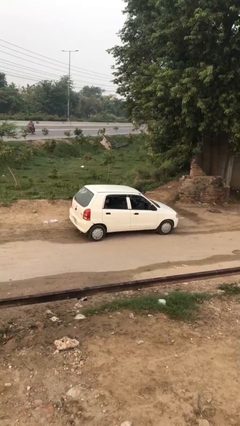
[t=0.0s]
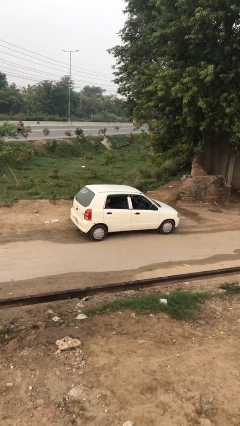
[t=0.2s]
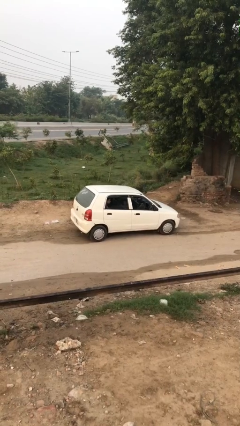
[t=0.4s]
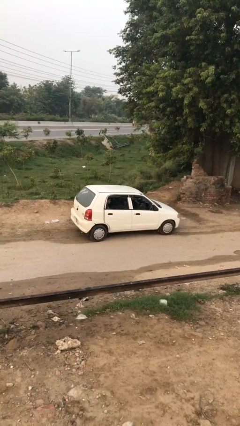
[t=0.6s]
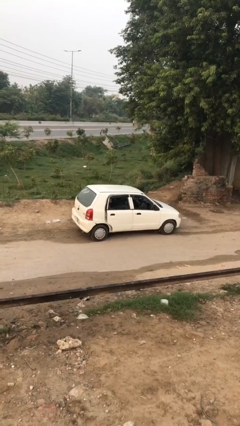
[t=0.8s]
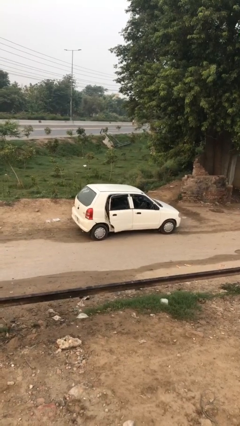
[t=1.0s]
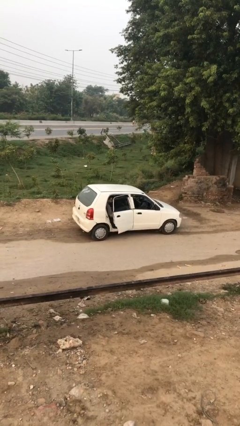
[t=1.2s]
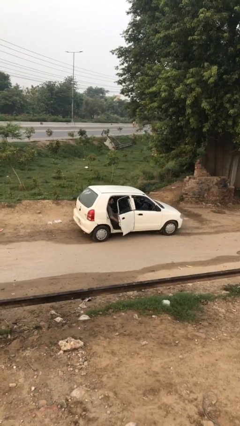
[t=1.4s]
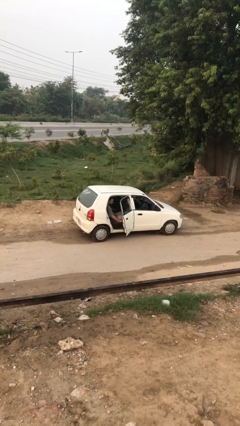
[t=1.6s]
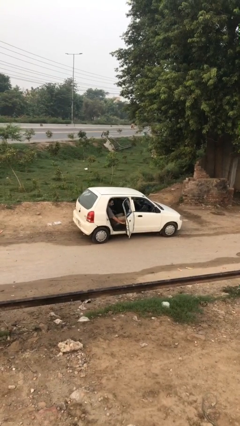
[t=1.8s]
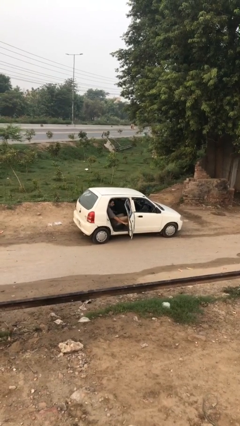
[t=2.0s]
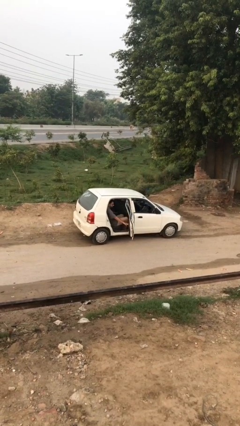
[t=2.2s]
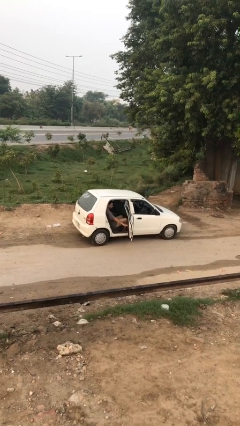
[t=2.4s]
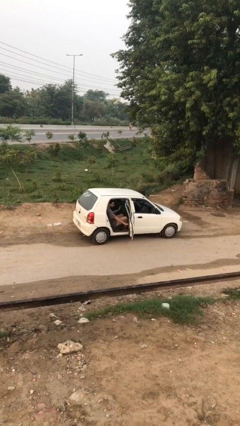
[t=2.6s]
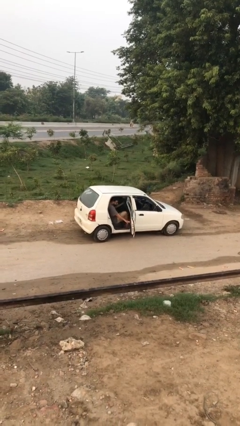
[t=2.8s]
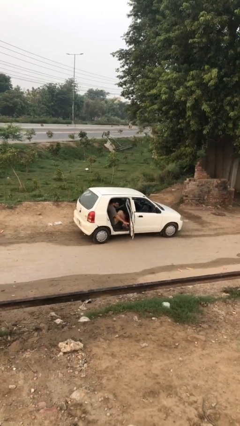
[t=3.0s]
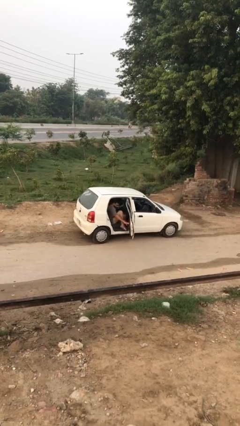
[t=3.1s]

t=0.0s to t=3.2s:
person opens car door

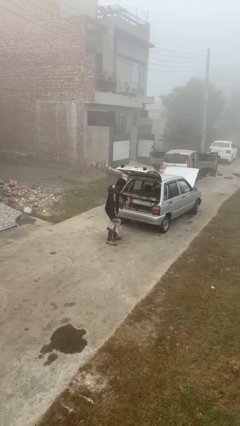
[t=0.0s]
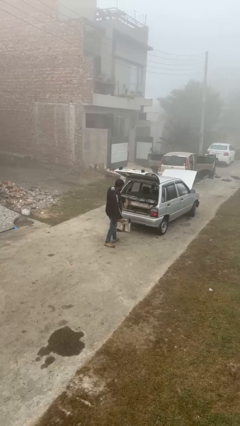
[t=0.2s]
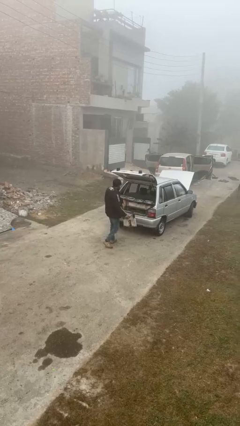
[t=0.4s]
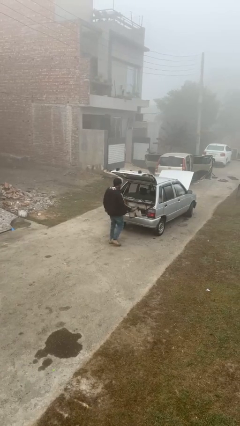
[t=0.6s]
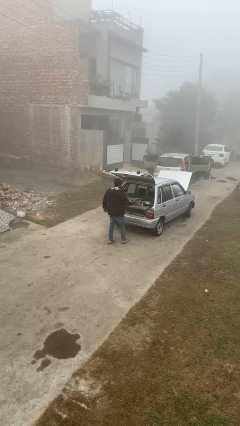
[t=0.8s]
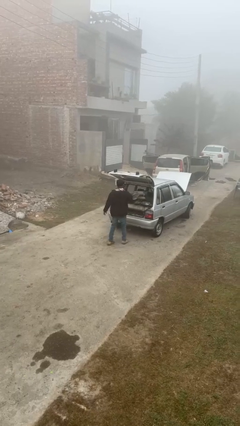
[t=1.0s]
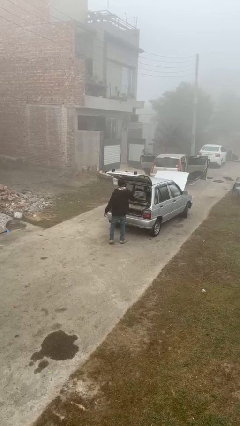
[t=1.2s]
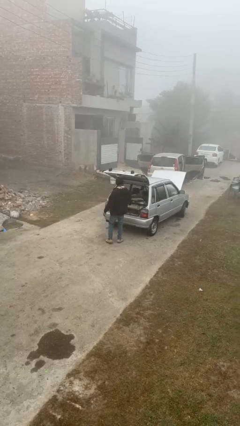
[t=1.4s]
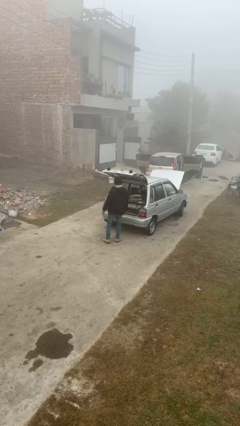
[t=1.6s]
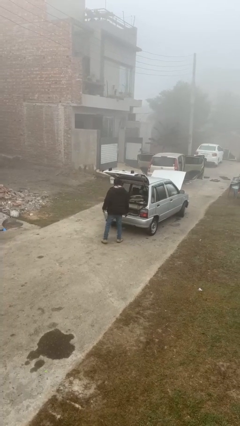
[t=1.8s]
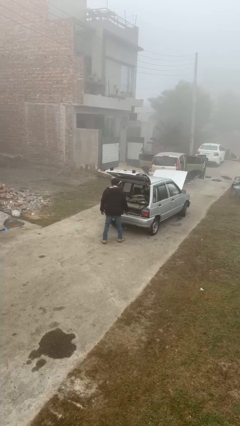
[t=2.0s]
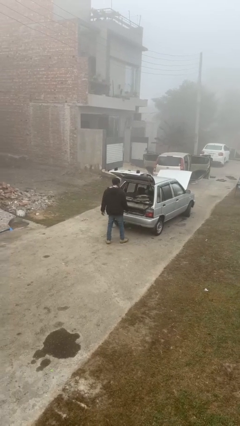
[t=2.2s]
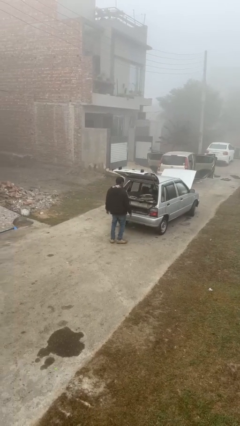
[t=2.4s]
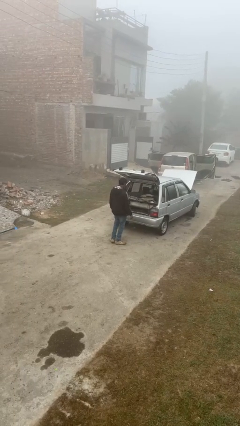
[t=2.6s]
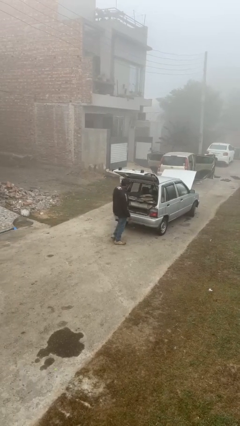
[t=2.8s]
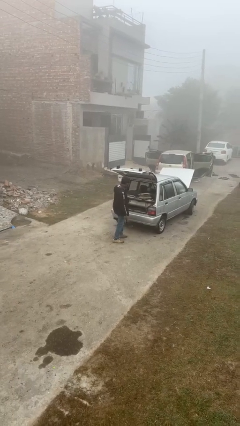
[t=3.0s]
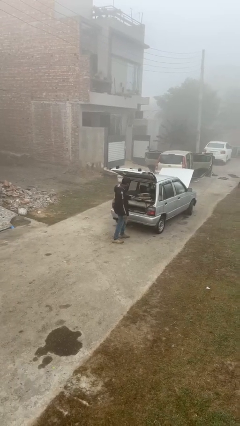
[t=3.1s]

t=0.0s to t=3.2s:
person loads car

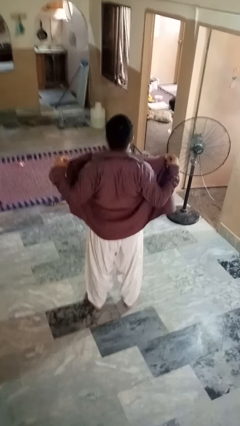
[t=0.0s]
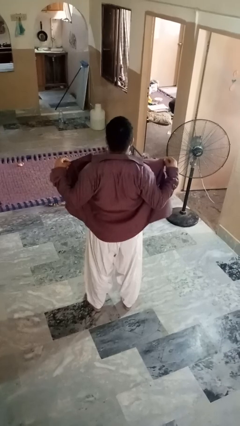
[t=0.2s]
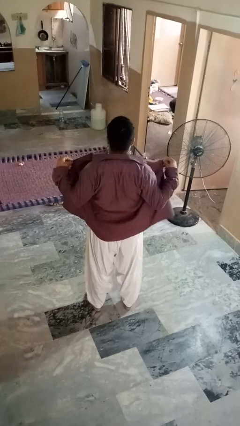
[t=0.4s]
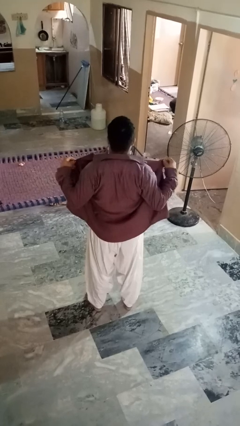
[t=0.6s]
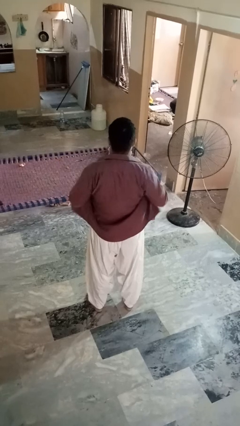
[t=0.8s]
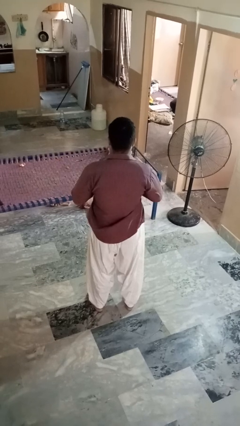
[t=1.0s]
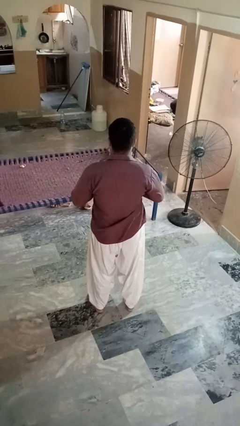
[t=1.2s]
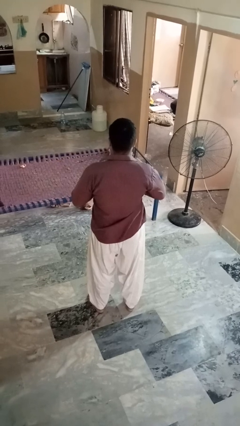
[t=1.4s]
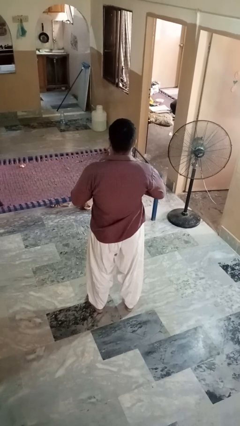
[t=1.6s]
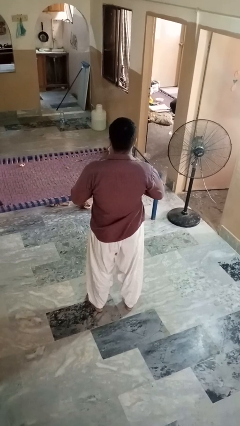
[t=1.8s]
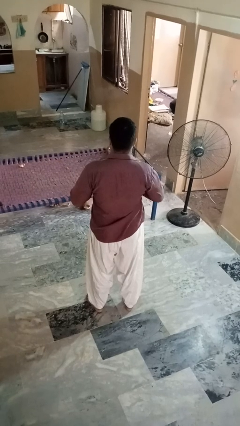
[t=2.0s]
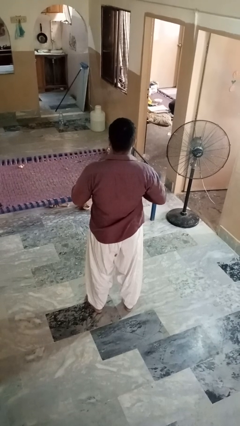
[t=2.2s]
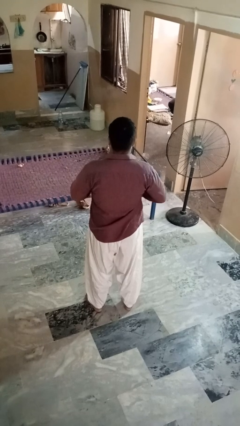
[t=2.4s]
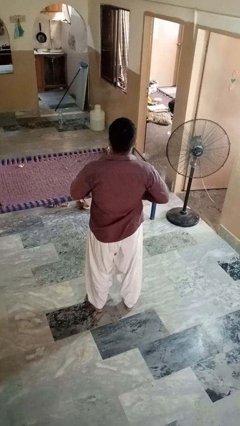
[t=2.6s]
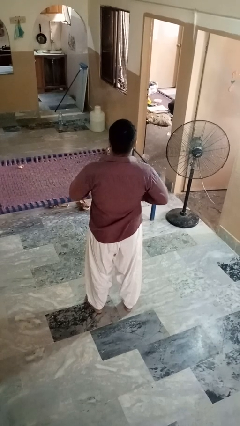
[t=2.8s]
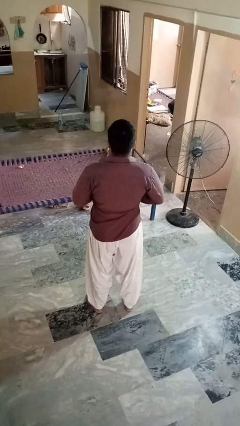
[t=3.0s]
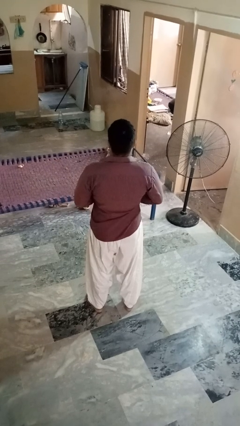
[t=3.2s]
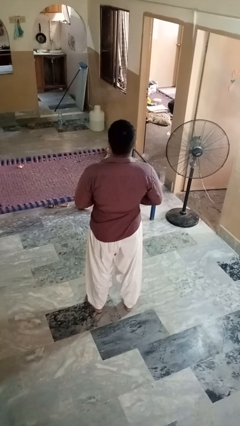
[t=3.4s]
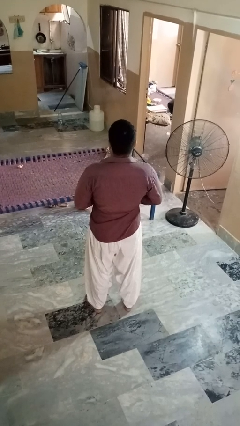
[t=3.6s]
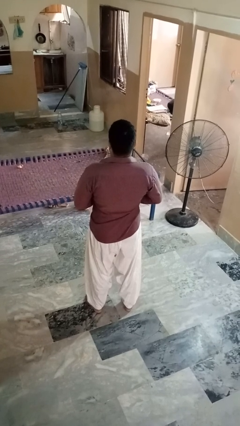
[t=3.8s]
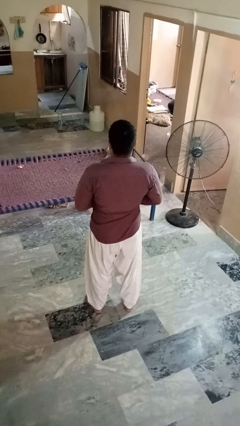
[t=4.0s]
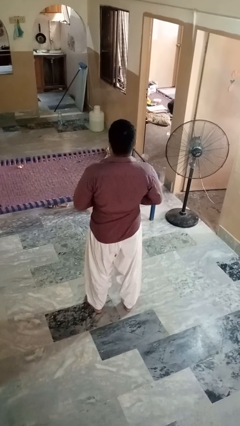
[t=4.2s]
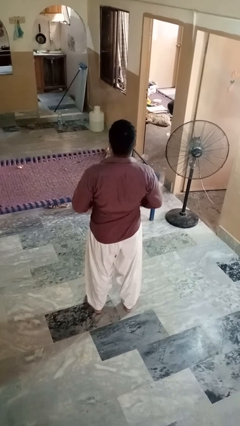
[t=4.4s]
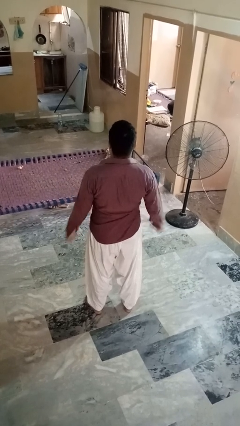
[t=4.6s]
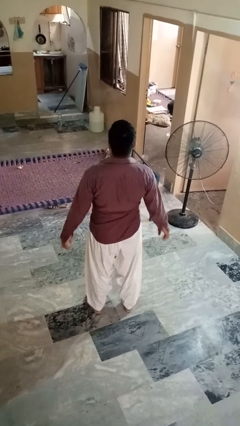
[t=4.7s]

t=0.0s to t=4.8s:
person buttons shirt

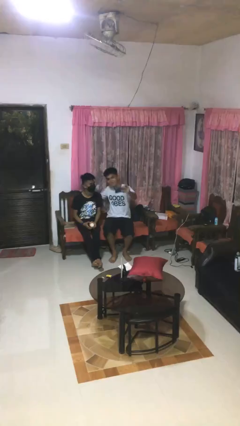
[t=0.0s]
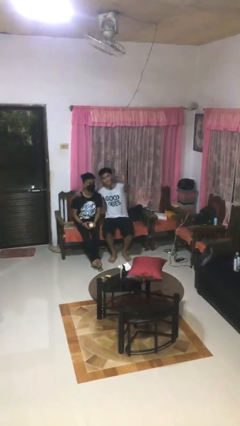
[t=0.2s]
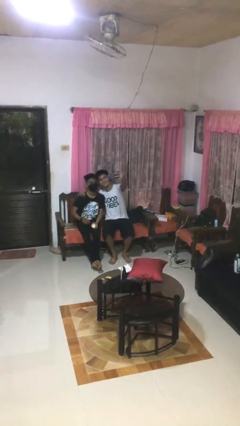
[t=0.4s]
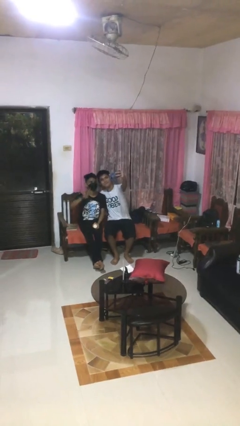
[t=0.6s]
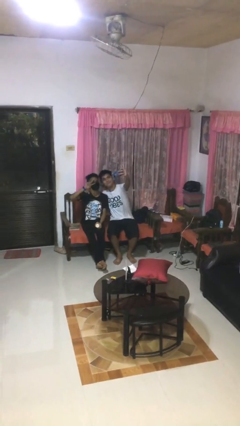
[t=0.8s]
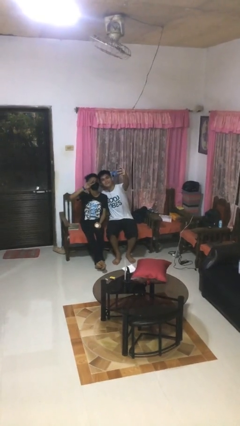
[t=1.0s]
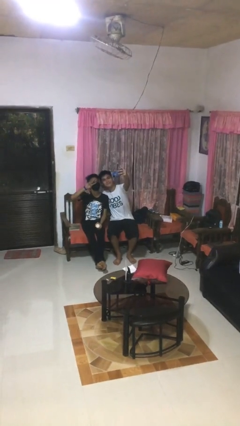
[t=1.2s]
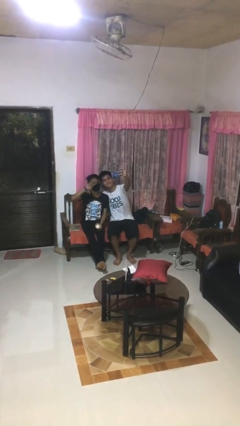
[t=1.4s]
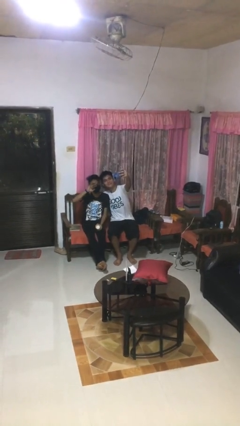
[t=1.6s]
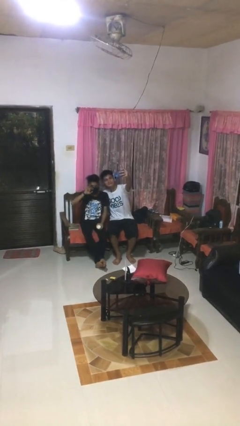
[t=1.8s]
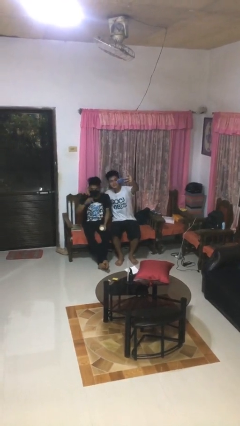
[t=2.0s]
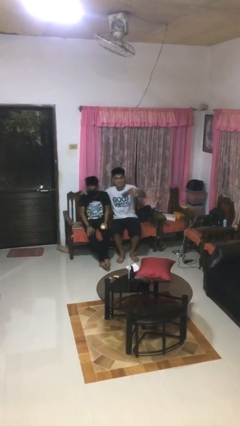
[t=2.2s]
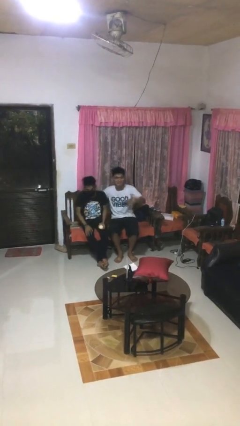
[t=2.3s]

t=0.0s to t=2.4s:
person takes selfie with person

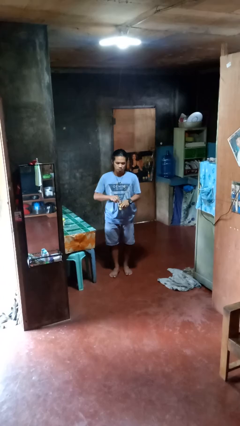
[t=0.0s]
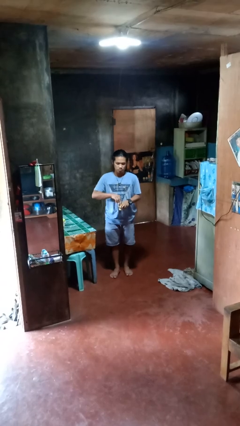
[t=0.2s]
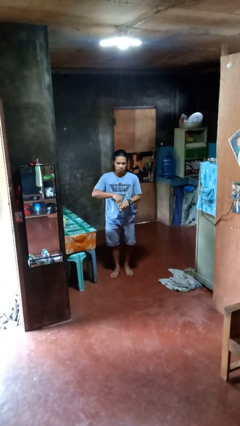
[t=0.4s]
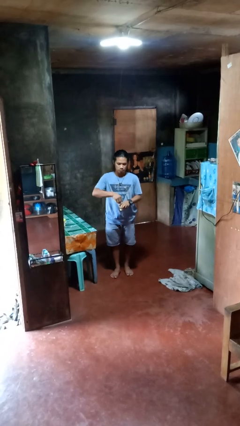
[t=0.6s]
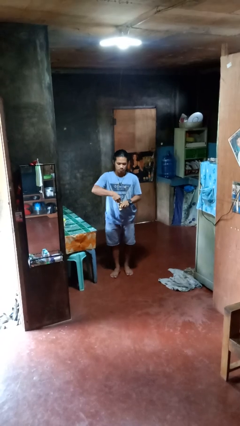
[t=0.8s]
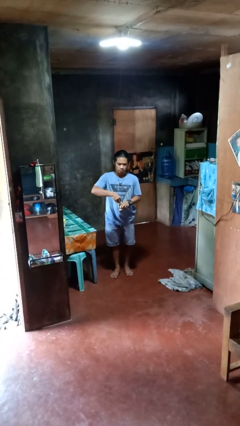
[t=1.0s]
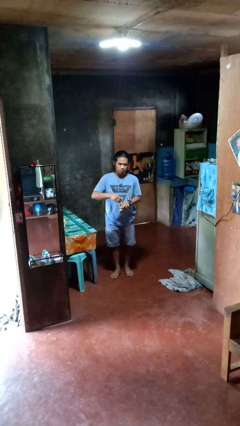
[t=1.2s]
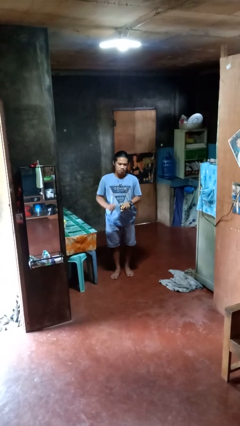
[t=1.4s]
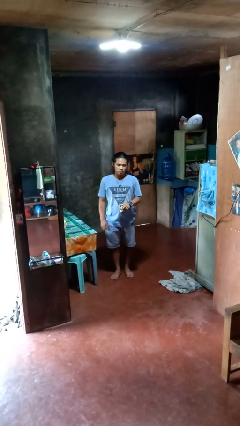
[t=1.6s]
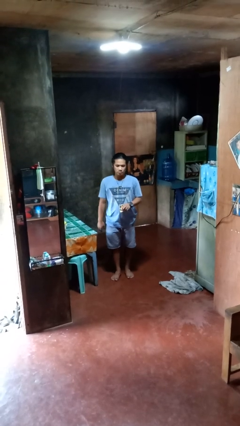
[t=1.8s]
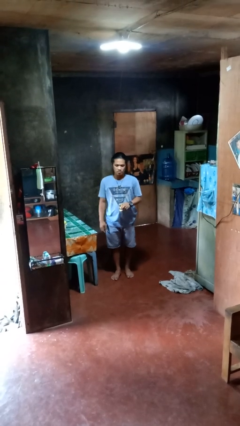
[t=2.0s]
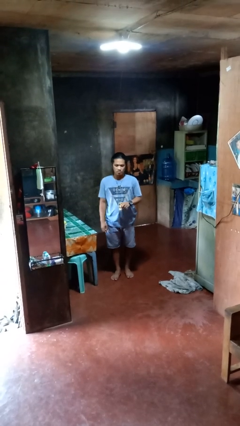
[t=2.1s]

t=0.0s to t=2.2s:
person opens beverage can

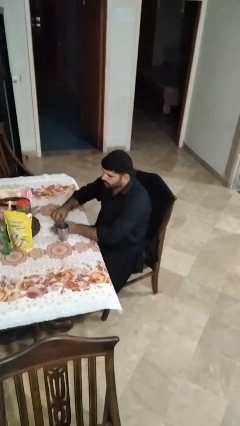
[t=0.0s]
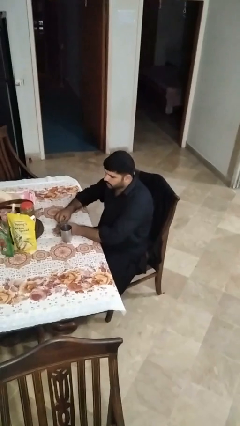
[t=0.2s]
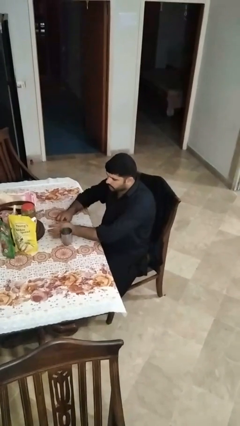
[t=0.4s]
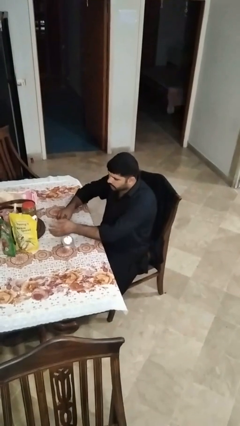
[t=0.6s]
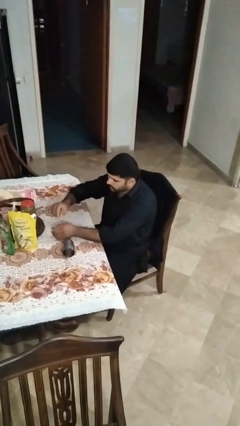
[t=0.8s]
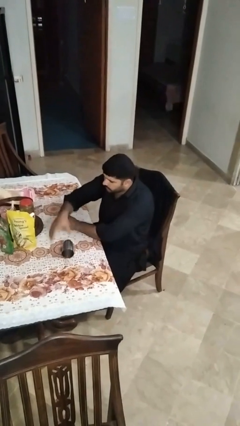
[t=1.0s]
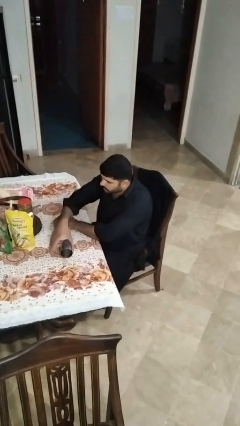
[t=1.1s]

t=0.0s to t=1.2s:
person knocks over glass

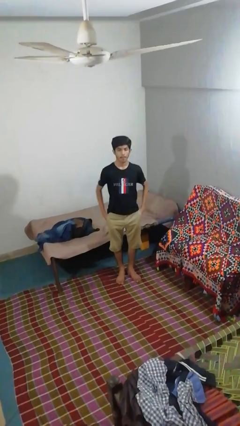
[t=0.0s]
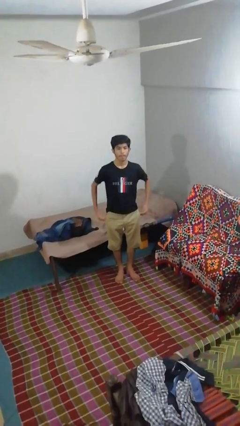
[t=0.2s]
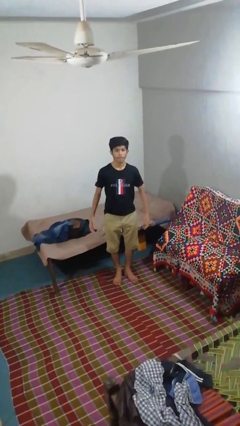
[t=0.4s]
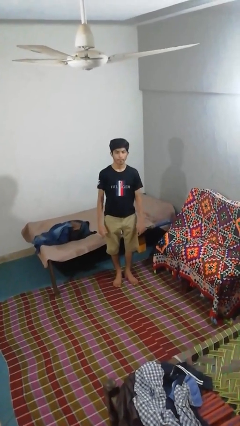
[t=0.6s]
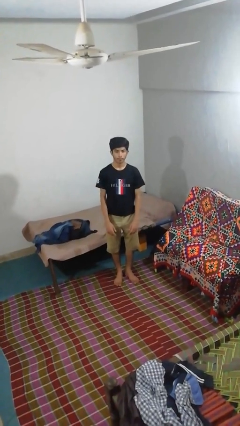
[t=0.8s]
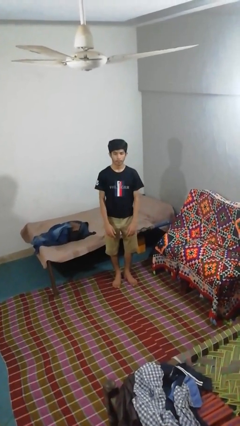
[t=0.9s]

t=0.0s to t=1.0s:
person puts hands in back pockets
